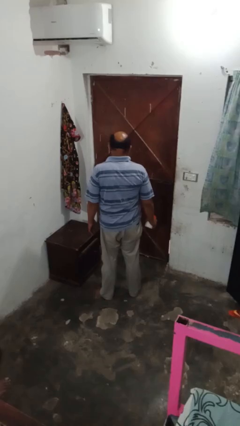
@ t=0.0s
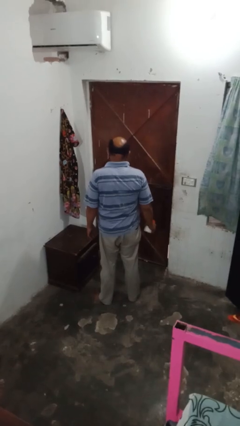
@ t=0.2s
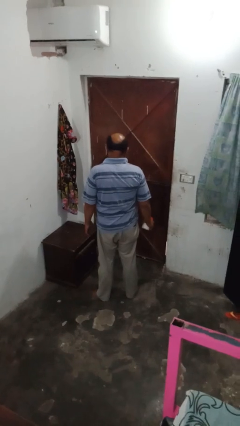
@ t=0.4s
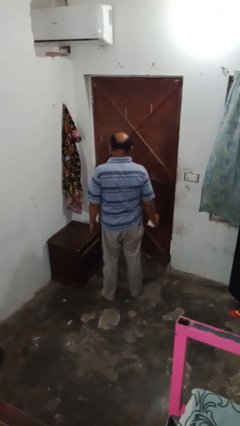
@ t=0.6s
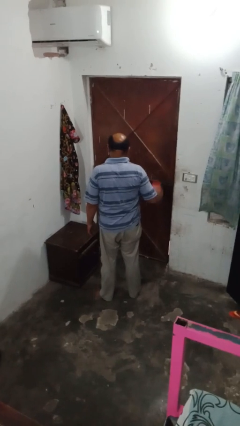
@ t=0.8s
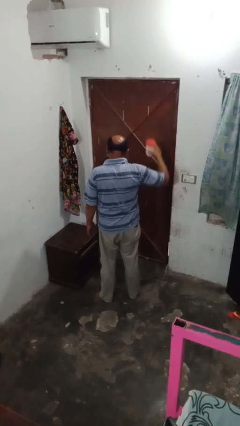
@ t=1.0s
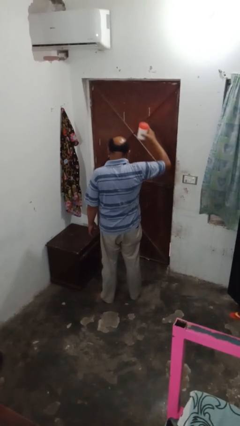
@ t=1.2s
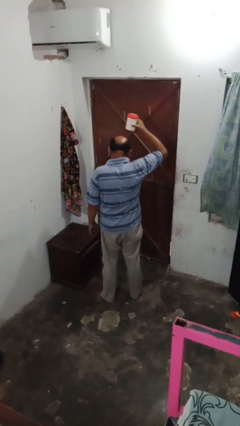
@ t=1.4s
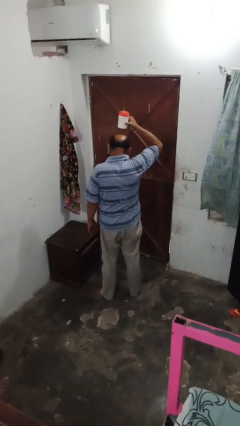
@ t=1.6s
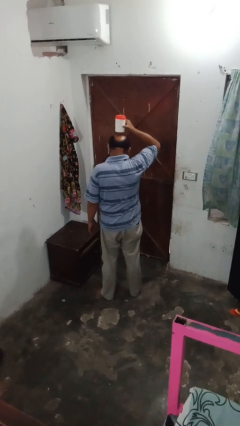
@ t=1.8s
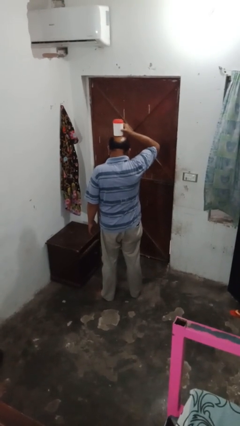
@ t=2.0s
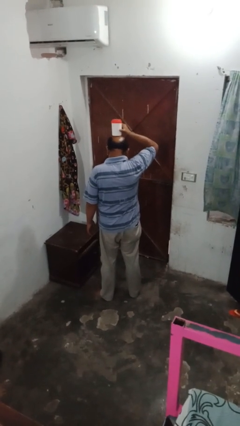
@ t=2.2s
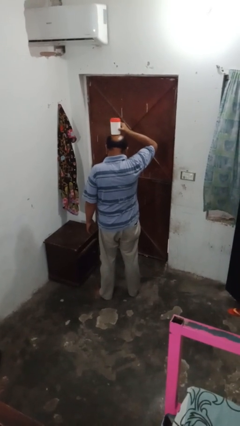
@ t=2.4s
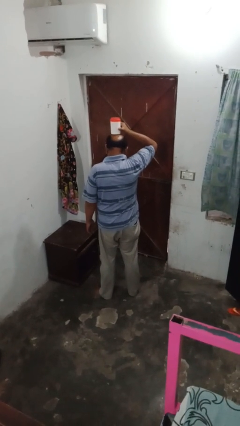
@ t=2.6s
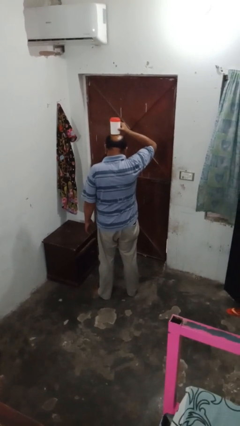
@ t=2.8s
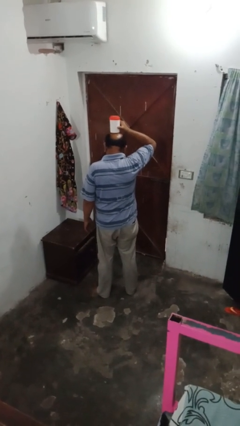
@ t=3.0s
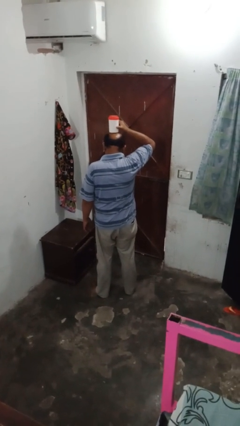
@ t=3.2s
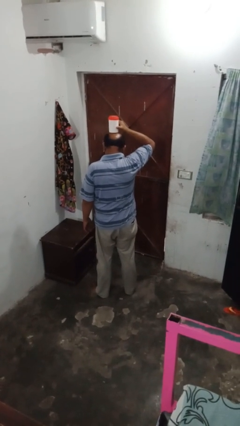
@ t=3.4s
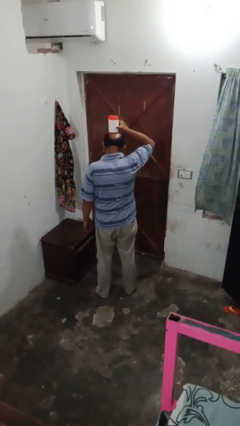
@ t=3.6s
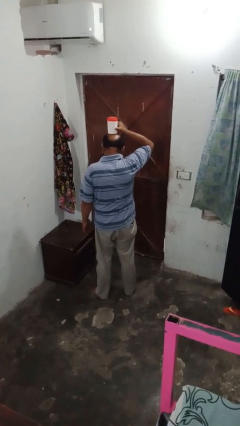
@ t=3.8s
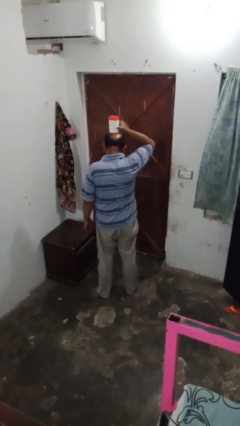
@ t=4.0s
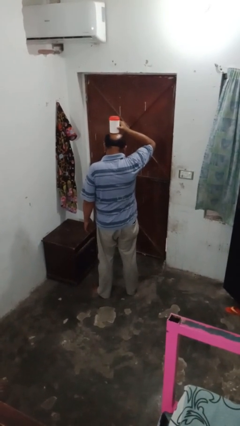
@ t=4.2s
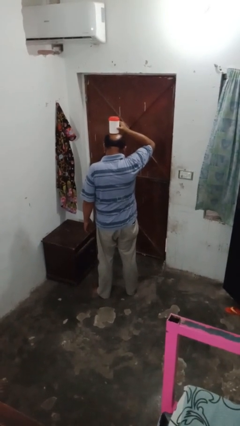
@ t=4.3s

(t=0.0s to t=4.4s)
person holds object above head

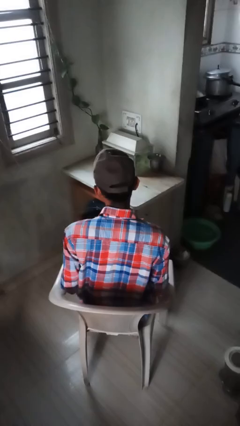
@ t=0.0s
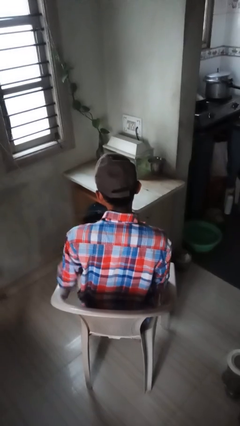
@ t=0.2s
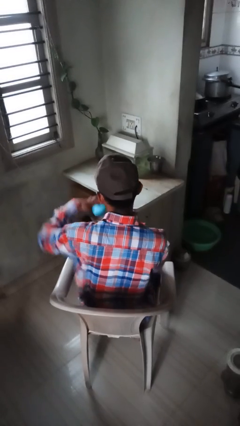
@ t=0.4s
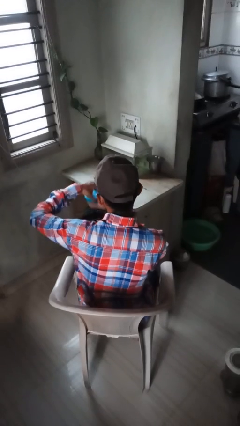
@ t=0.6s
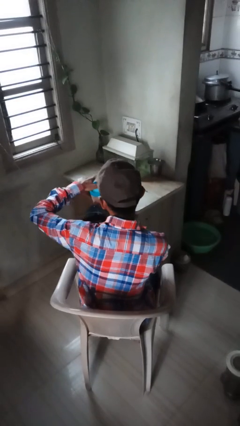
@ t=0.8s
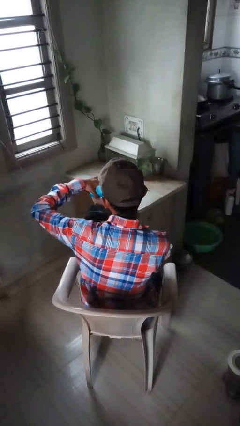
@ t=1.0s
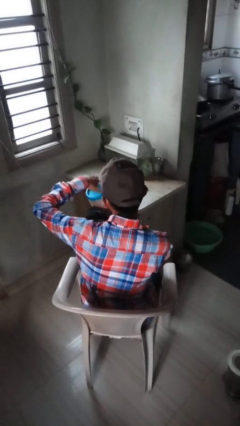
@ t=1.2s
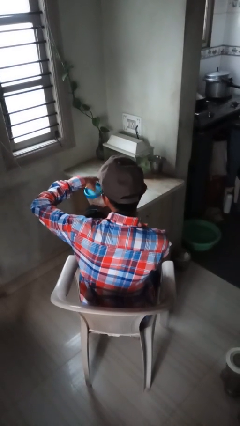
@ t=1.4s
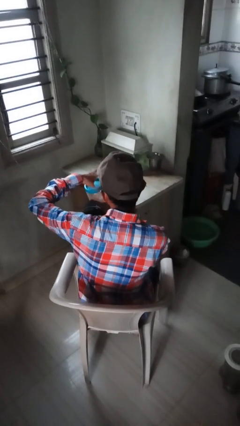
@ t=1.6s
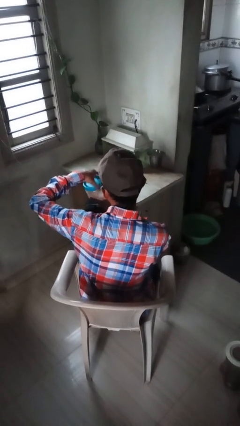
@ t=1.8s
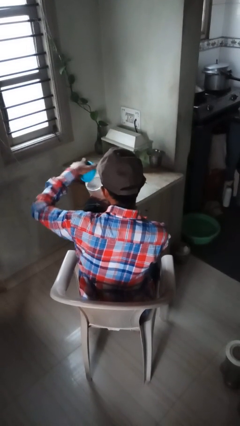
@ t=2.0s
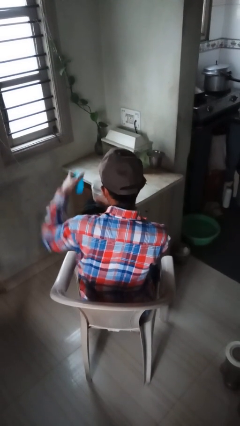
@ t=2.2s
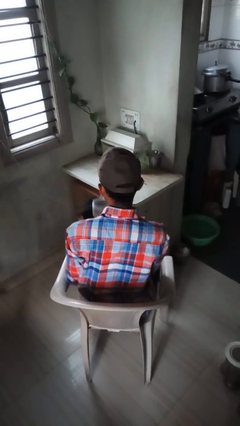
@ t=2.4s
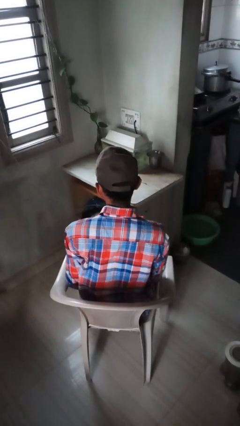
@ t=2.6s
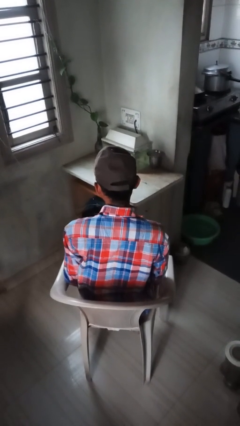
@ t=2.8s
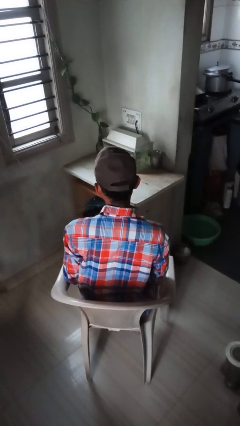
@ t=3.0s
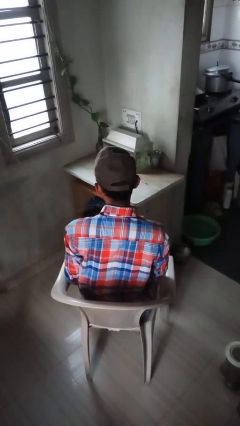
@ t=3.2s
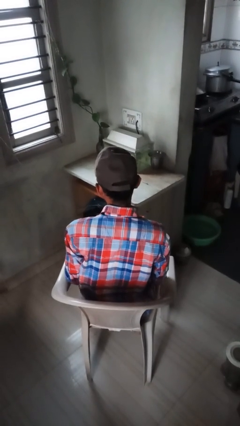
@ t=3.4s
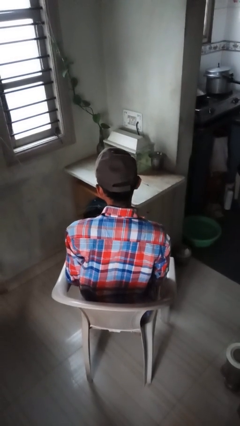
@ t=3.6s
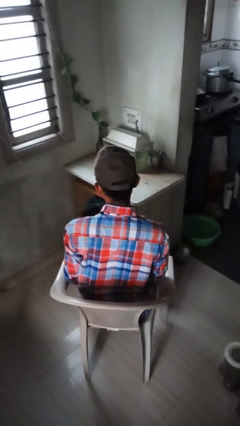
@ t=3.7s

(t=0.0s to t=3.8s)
person opens jar

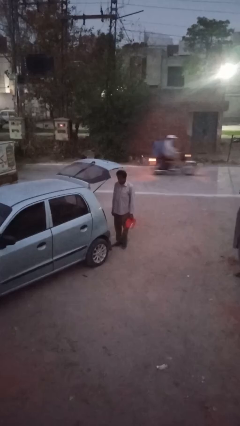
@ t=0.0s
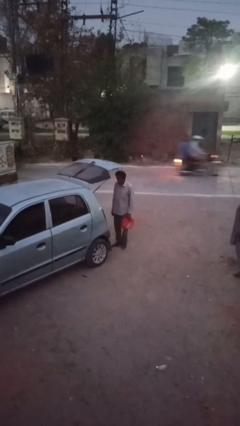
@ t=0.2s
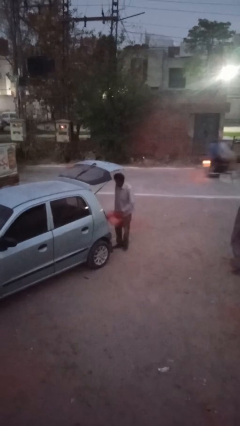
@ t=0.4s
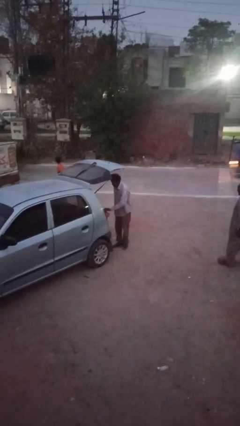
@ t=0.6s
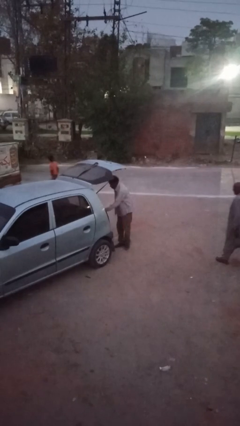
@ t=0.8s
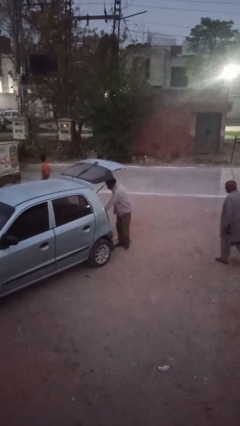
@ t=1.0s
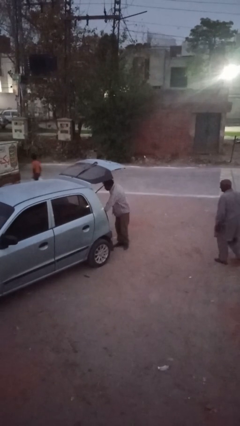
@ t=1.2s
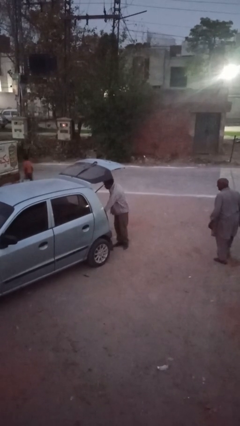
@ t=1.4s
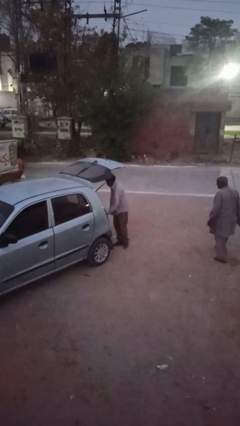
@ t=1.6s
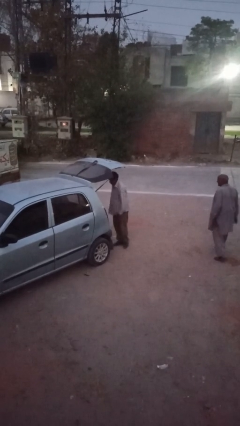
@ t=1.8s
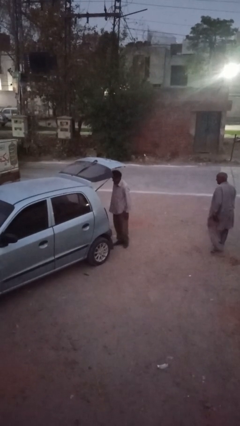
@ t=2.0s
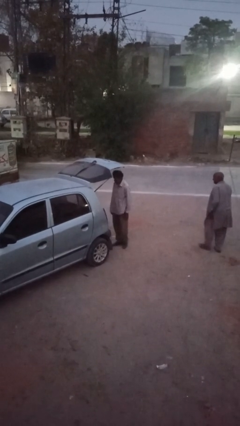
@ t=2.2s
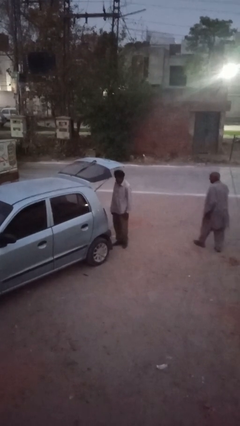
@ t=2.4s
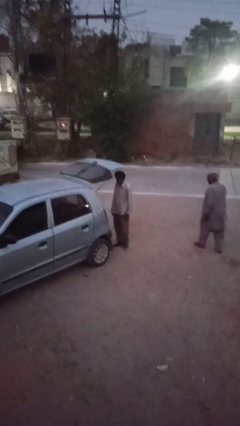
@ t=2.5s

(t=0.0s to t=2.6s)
person loads car

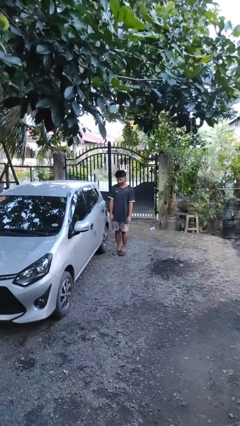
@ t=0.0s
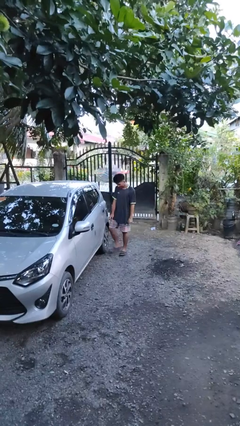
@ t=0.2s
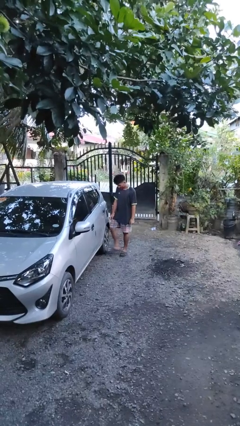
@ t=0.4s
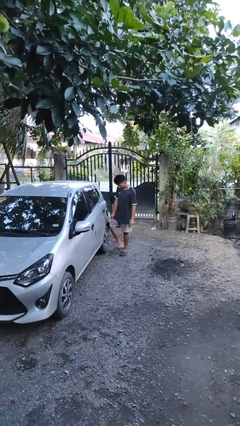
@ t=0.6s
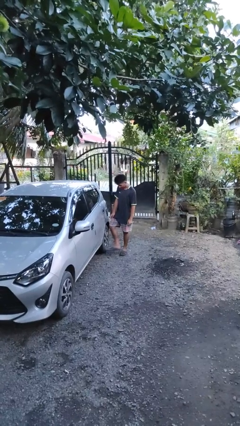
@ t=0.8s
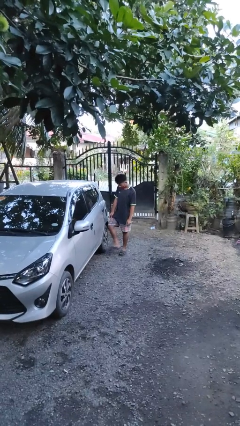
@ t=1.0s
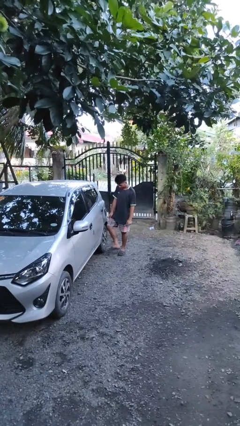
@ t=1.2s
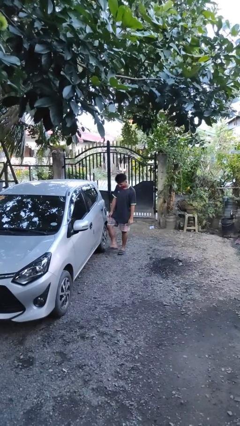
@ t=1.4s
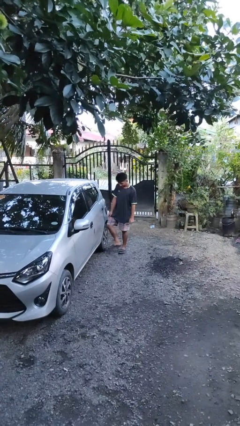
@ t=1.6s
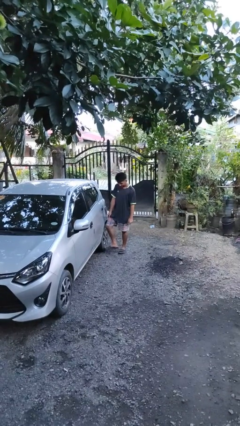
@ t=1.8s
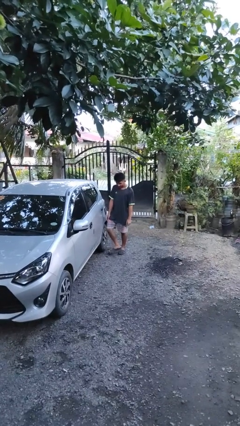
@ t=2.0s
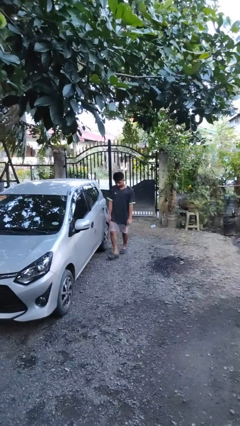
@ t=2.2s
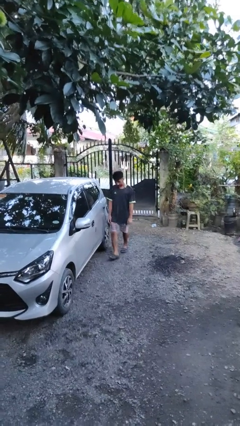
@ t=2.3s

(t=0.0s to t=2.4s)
person kicks car tires

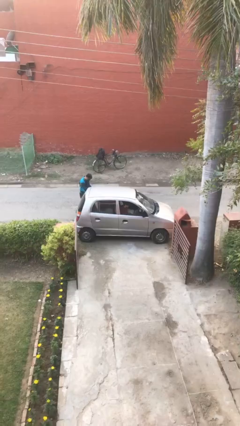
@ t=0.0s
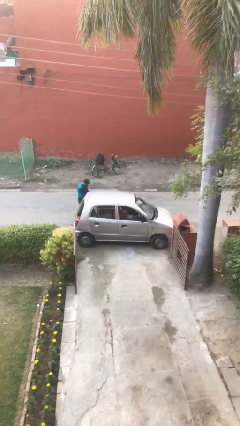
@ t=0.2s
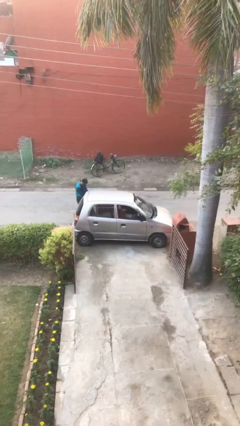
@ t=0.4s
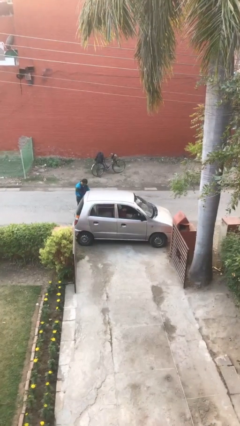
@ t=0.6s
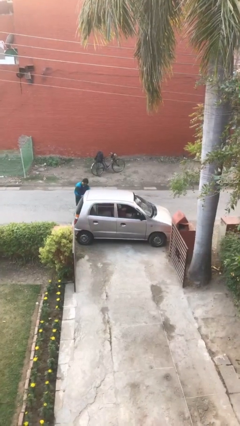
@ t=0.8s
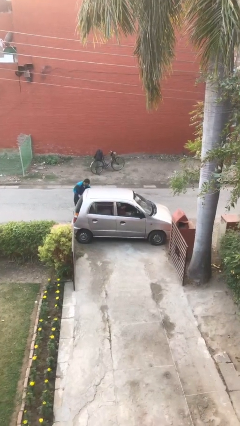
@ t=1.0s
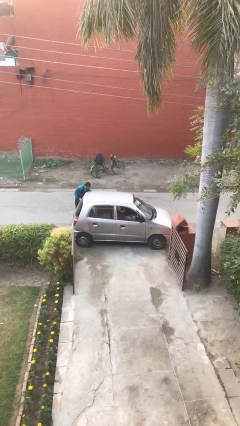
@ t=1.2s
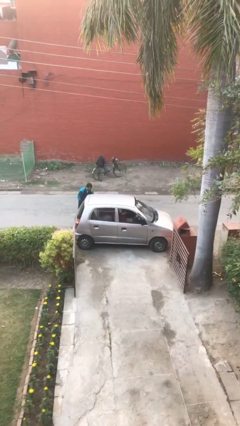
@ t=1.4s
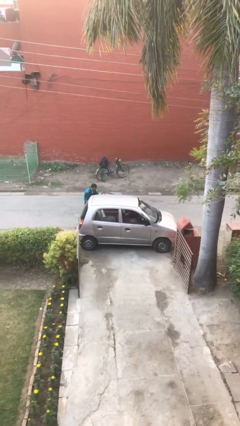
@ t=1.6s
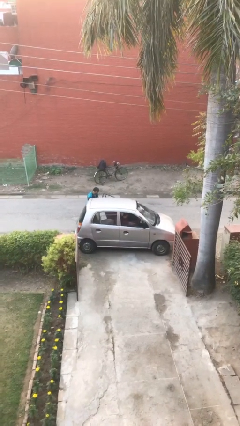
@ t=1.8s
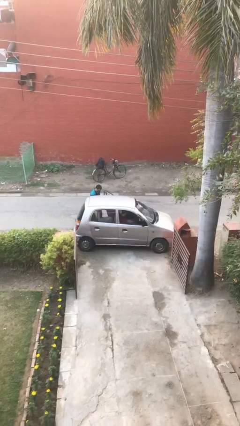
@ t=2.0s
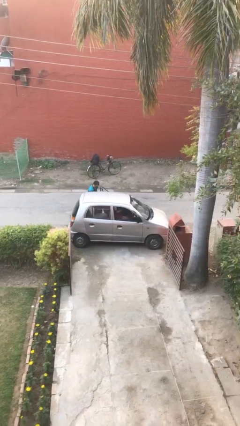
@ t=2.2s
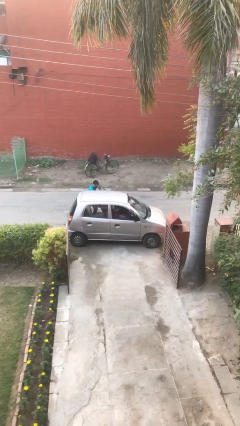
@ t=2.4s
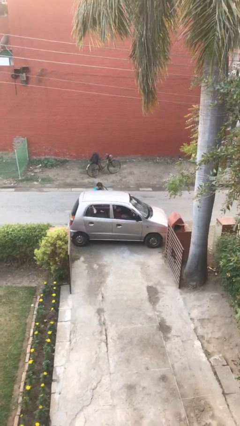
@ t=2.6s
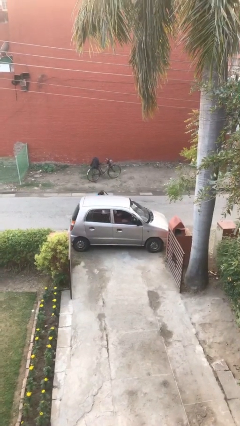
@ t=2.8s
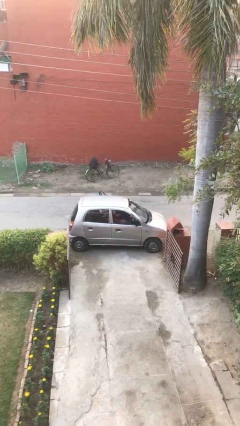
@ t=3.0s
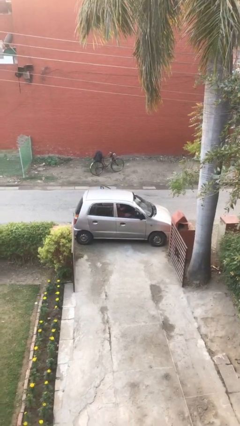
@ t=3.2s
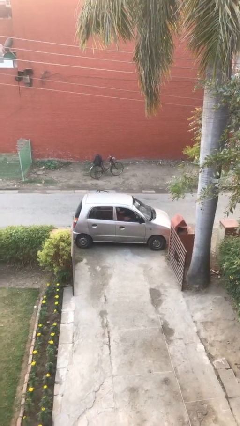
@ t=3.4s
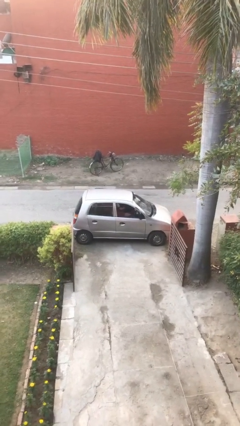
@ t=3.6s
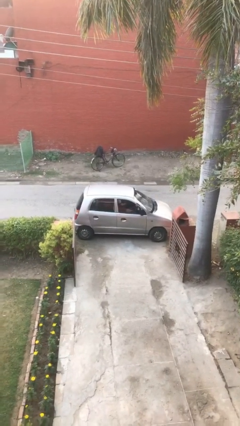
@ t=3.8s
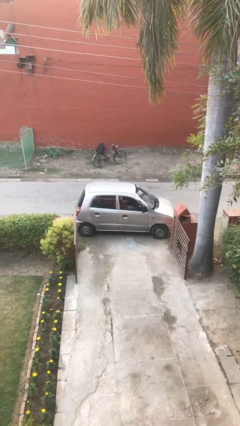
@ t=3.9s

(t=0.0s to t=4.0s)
car picks up person

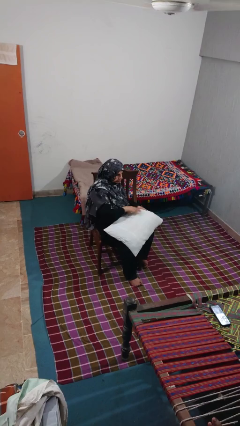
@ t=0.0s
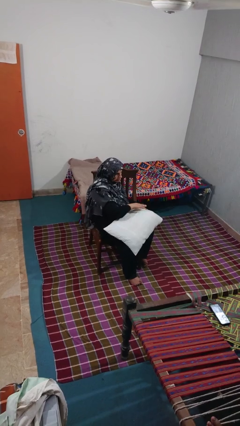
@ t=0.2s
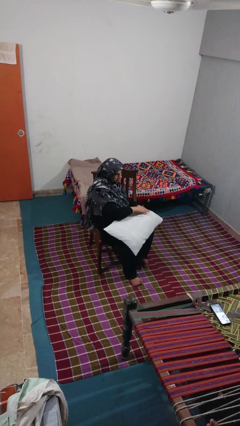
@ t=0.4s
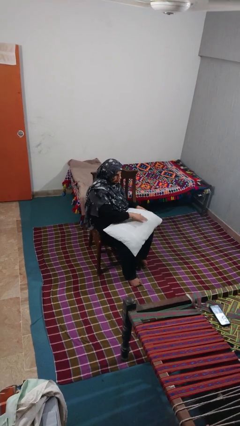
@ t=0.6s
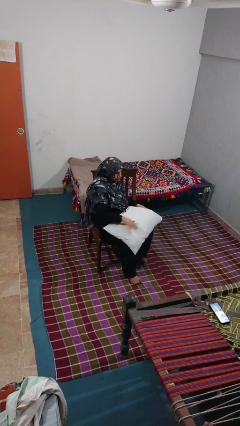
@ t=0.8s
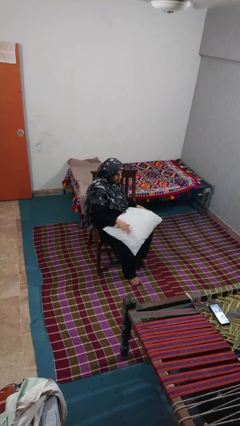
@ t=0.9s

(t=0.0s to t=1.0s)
person waves hand over object
